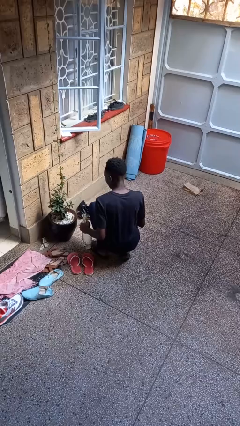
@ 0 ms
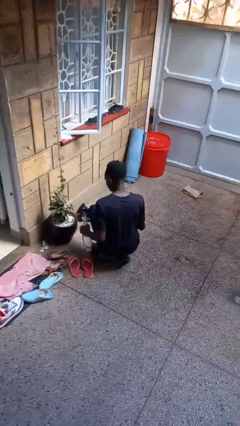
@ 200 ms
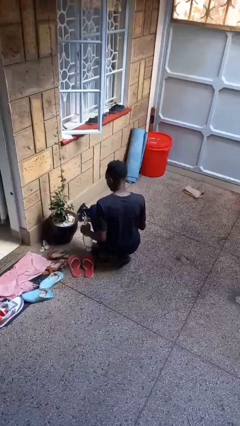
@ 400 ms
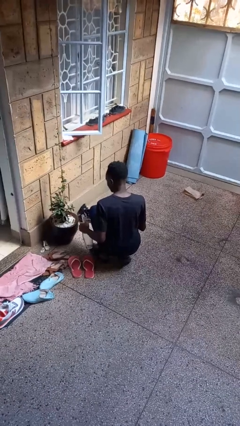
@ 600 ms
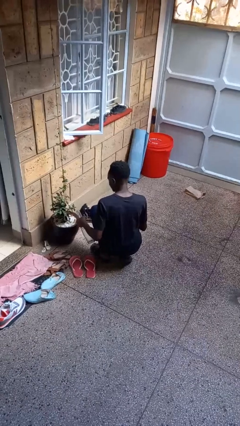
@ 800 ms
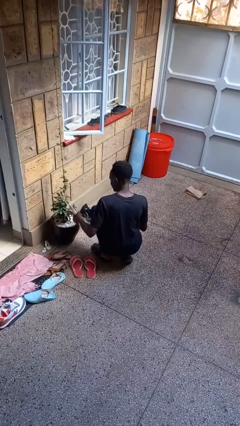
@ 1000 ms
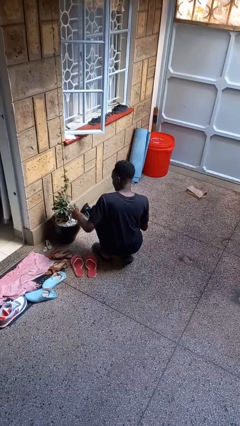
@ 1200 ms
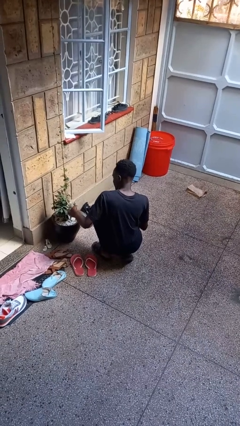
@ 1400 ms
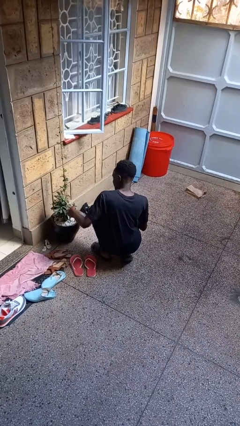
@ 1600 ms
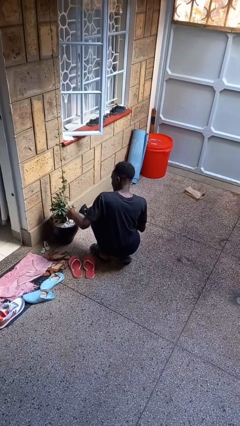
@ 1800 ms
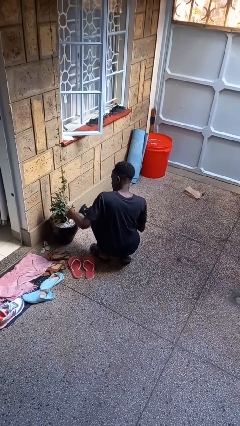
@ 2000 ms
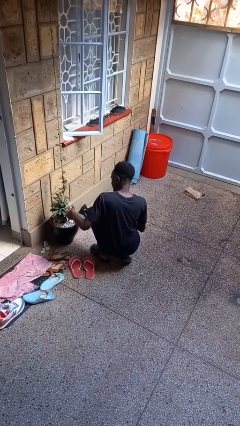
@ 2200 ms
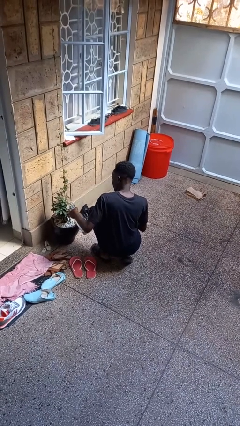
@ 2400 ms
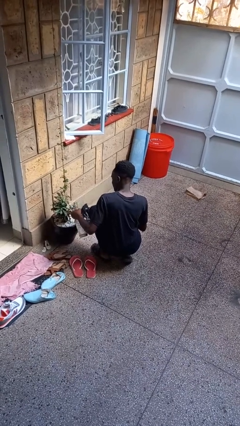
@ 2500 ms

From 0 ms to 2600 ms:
person waters houseplant

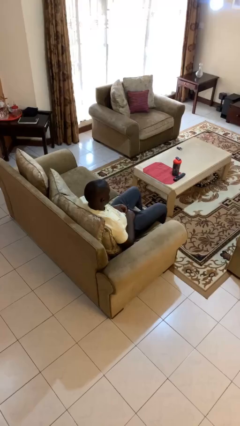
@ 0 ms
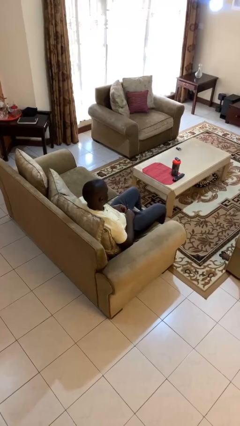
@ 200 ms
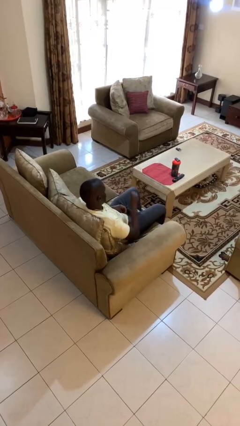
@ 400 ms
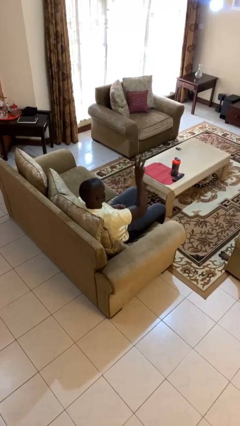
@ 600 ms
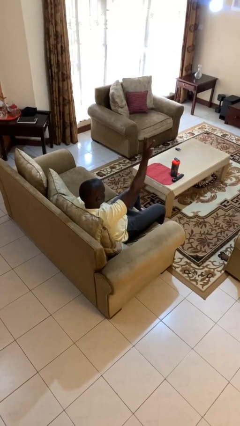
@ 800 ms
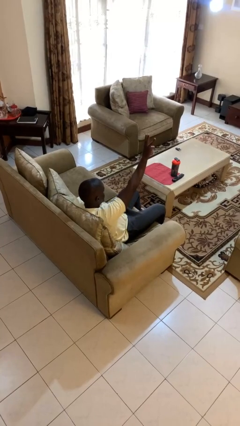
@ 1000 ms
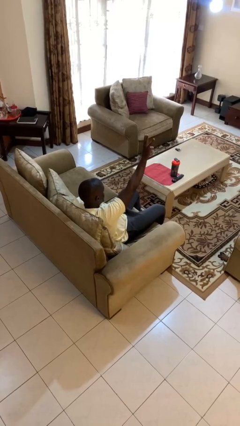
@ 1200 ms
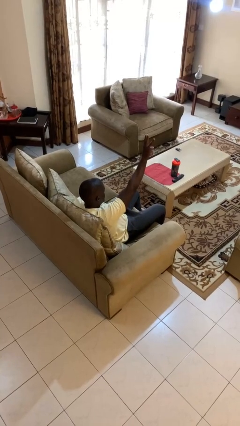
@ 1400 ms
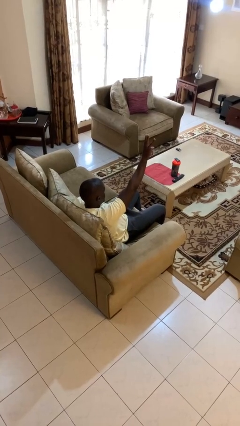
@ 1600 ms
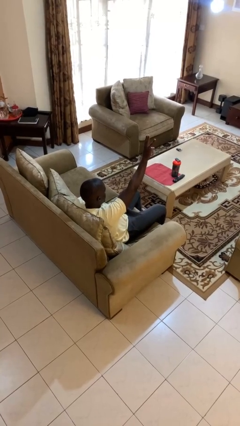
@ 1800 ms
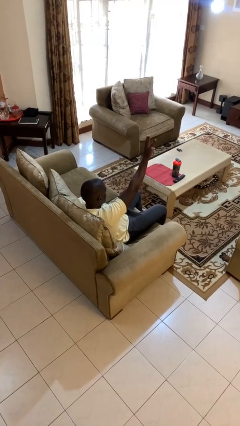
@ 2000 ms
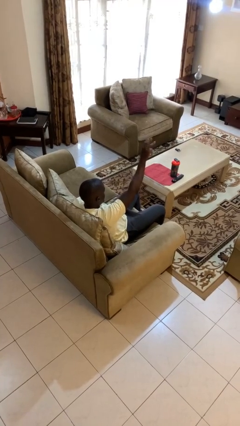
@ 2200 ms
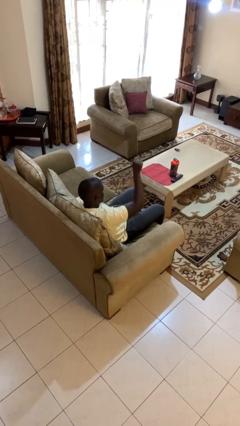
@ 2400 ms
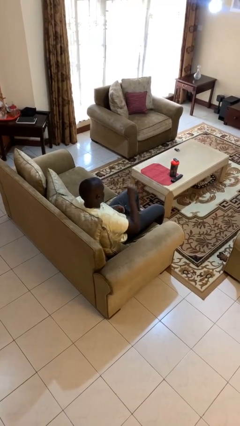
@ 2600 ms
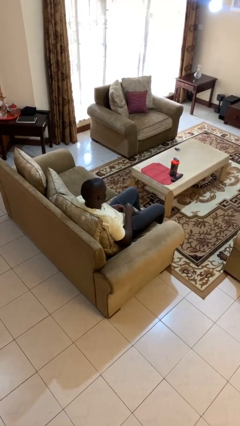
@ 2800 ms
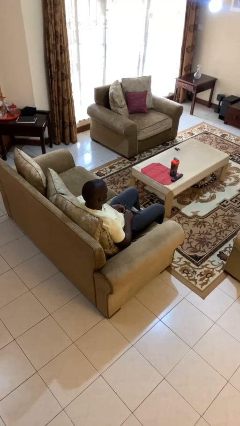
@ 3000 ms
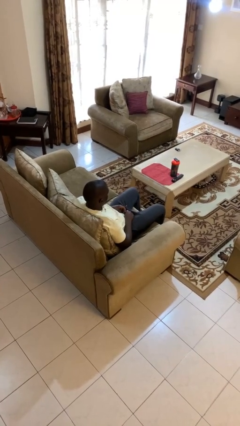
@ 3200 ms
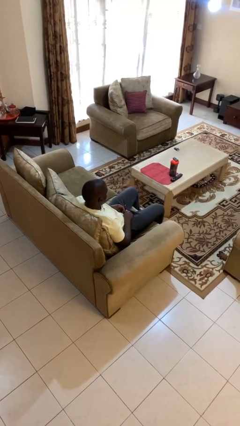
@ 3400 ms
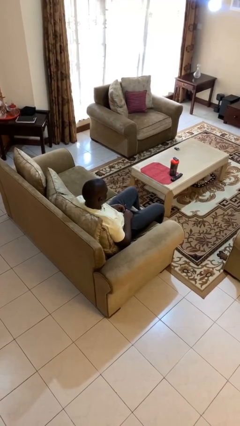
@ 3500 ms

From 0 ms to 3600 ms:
person gestures number three

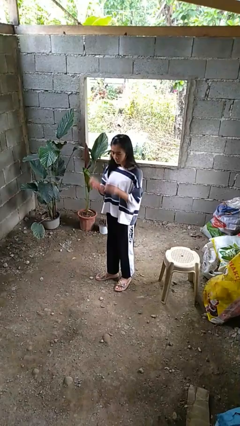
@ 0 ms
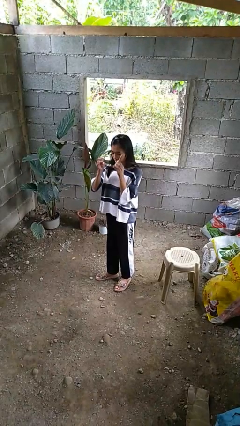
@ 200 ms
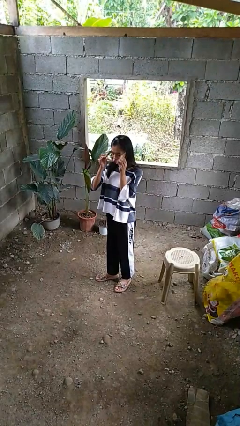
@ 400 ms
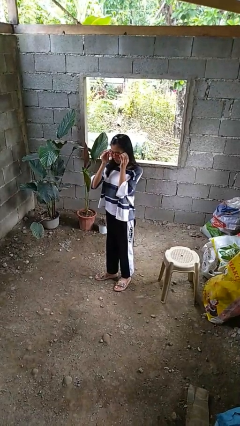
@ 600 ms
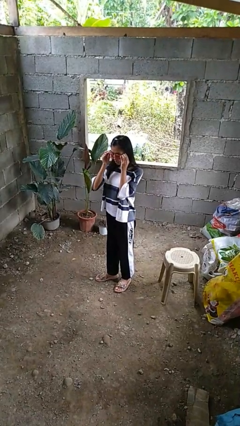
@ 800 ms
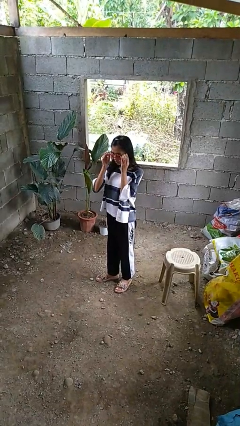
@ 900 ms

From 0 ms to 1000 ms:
person puts on sunglasses

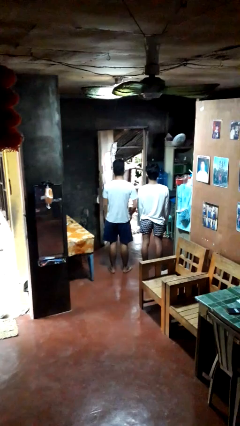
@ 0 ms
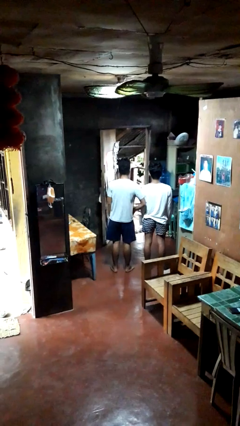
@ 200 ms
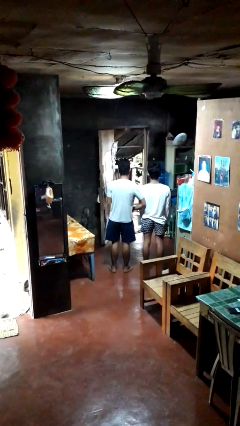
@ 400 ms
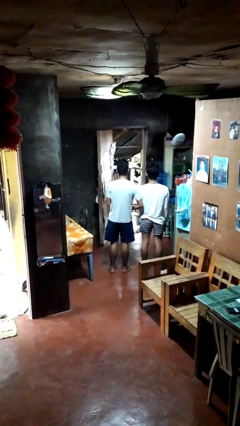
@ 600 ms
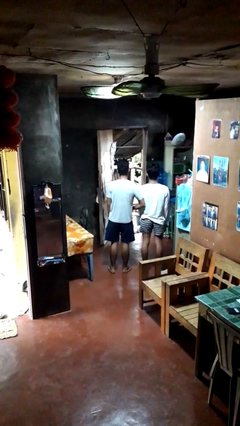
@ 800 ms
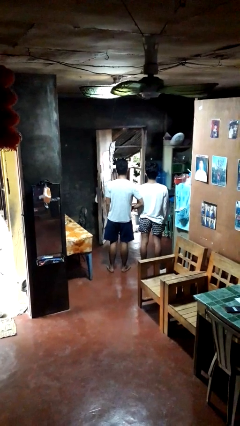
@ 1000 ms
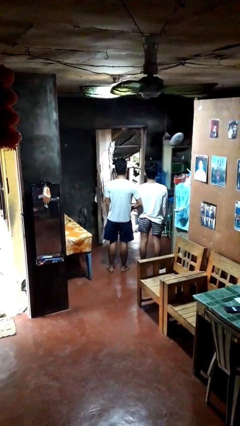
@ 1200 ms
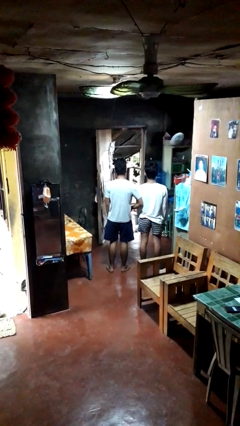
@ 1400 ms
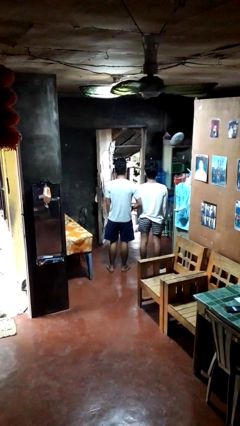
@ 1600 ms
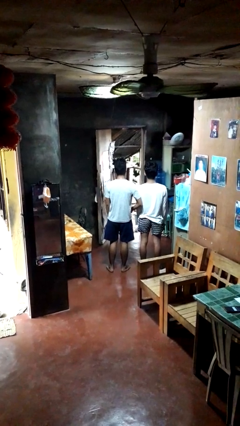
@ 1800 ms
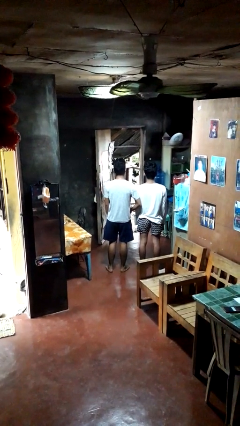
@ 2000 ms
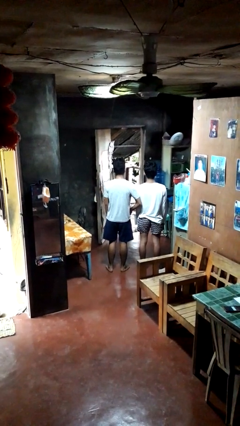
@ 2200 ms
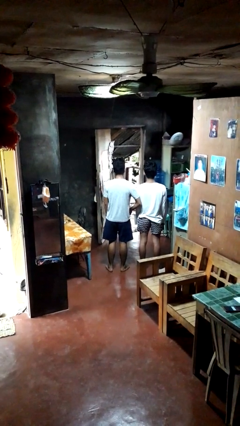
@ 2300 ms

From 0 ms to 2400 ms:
person nudges person with elbow

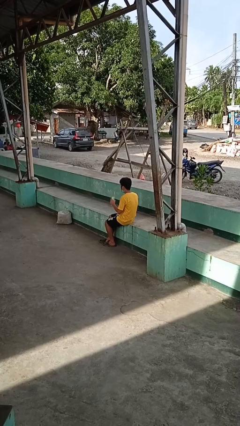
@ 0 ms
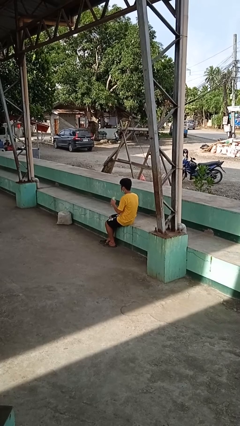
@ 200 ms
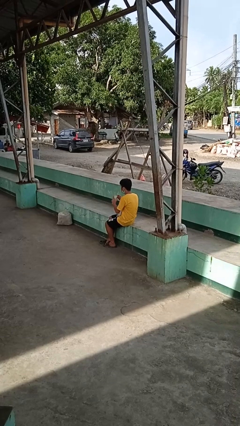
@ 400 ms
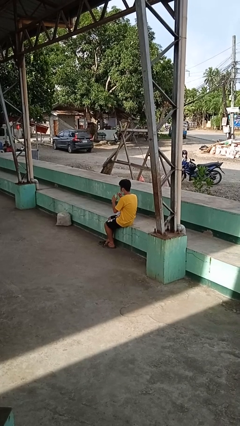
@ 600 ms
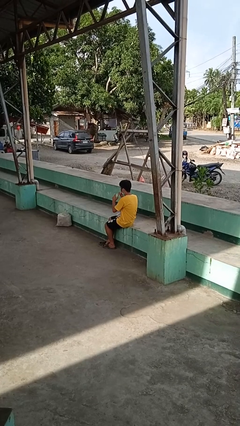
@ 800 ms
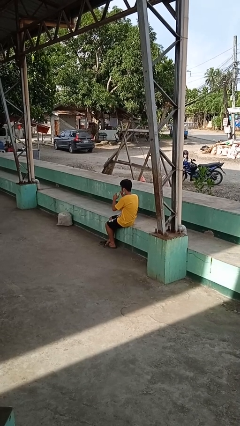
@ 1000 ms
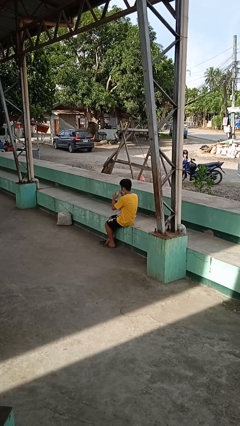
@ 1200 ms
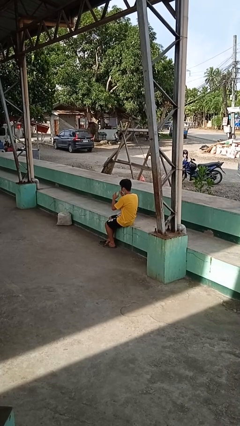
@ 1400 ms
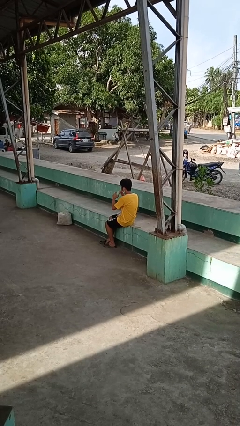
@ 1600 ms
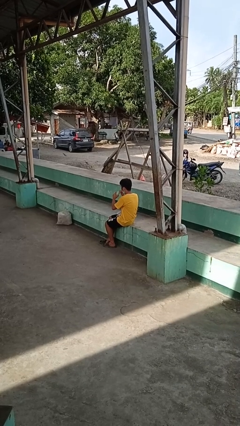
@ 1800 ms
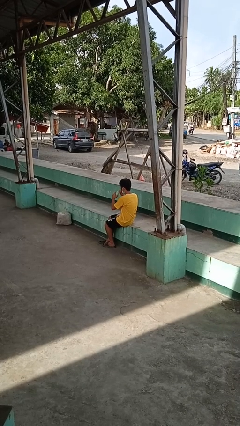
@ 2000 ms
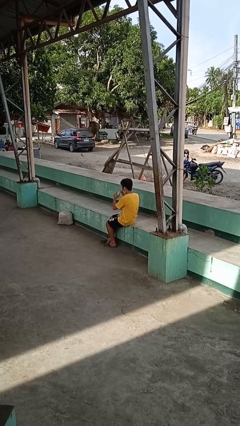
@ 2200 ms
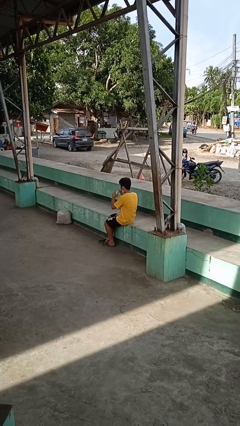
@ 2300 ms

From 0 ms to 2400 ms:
person drinks from straw

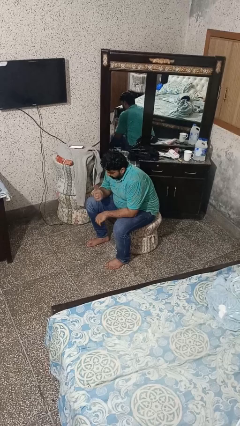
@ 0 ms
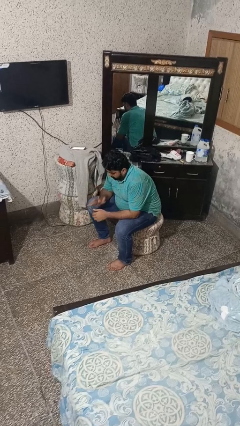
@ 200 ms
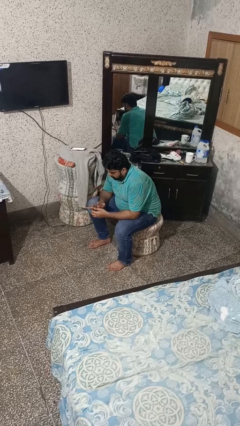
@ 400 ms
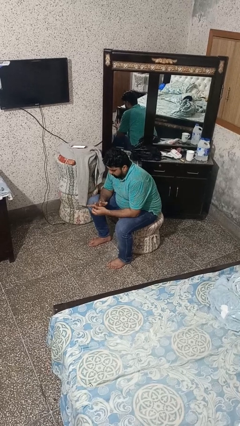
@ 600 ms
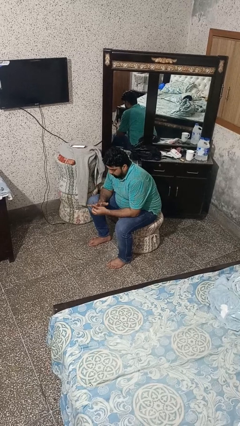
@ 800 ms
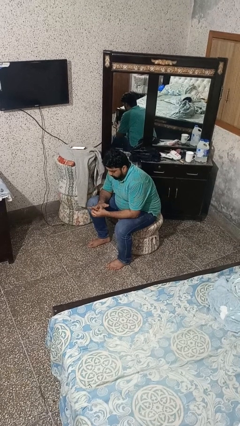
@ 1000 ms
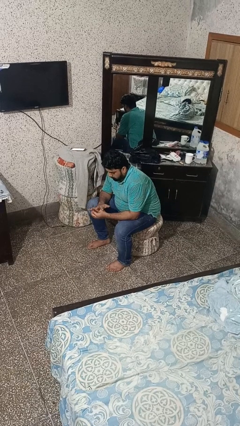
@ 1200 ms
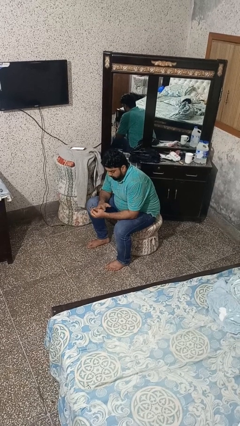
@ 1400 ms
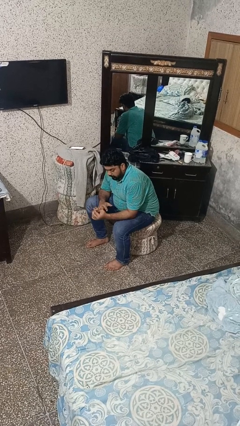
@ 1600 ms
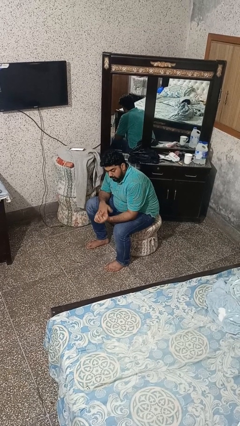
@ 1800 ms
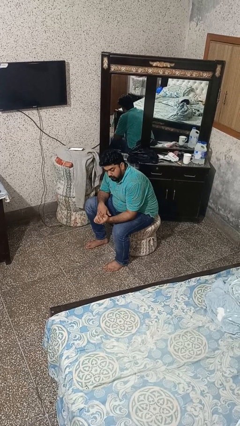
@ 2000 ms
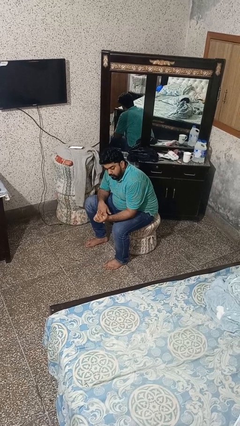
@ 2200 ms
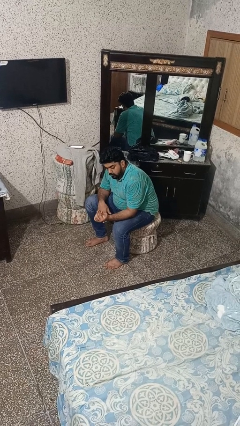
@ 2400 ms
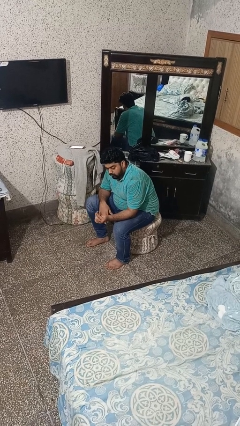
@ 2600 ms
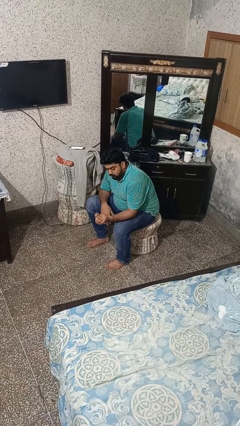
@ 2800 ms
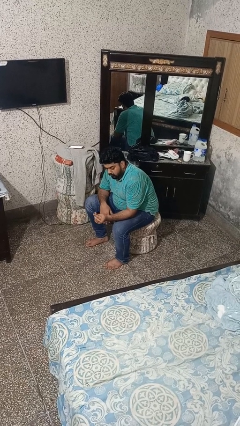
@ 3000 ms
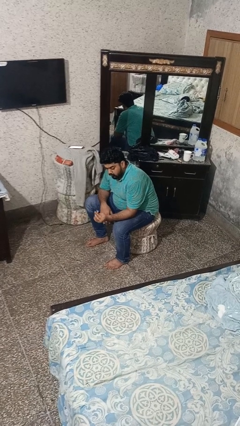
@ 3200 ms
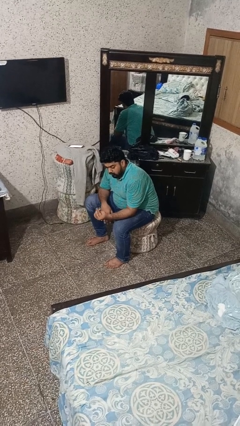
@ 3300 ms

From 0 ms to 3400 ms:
person takes off ring

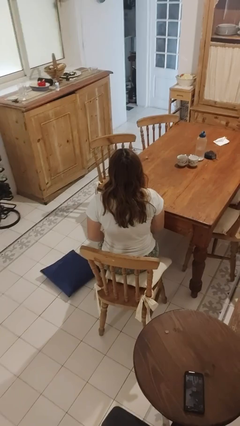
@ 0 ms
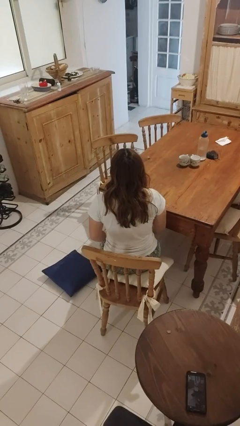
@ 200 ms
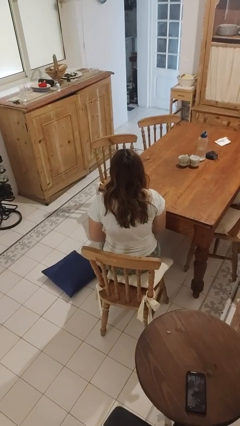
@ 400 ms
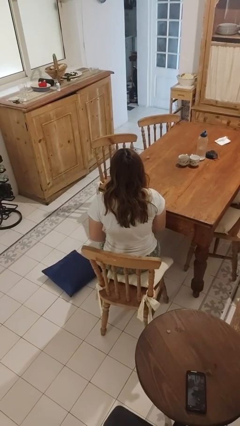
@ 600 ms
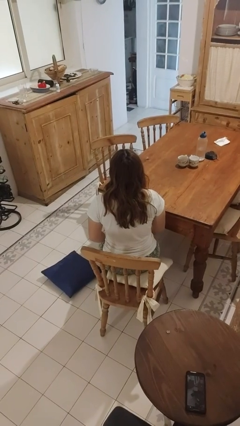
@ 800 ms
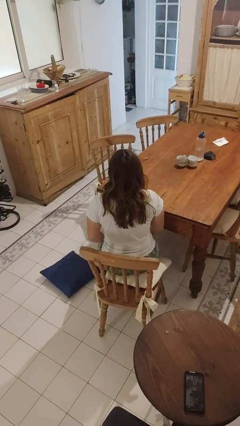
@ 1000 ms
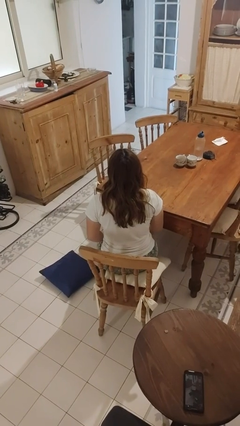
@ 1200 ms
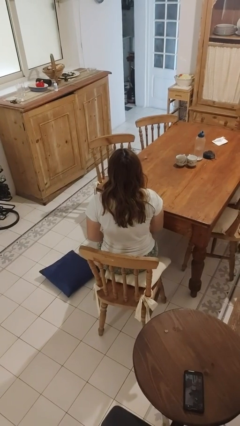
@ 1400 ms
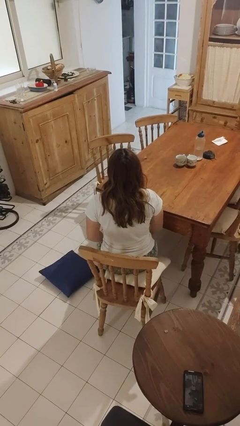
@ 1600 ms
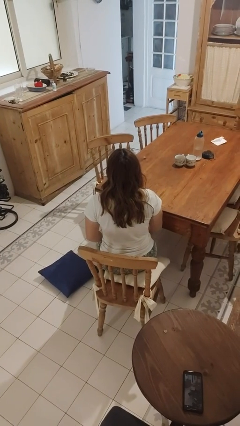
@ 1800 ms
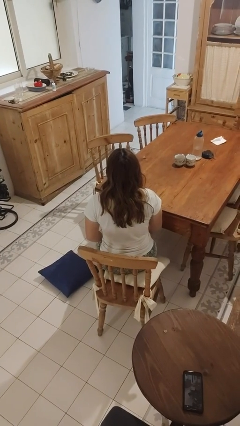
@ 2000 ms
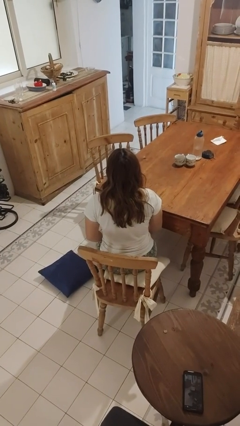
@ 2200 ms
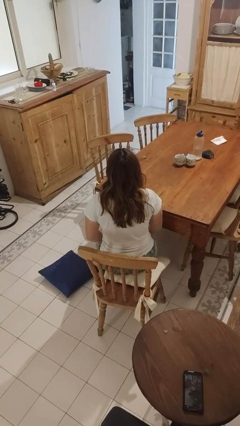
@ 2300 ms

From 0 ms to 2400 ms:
person falls from chair
